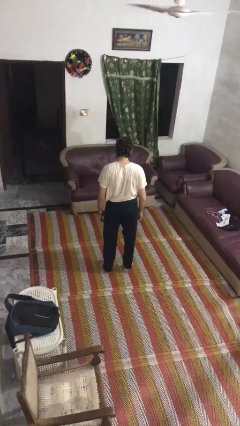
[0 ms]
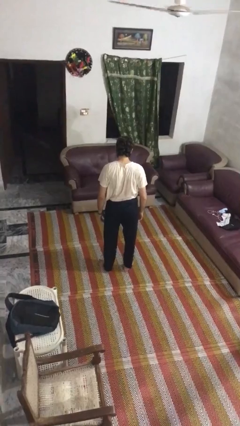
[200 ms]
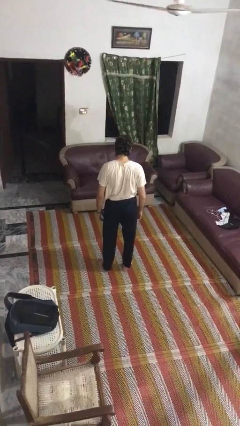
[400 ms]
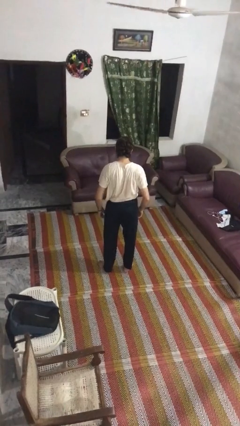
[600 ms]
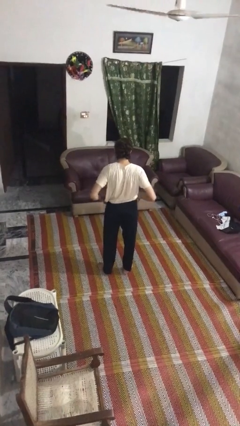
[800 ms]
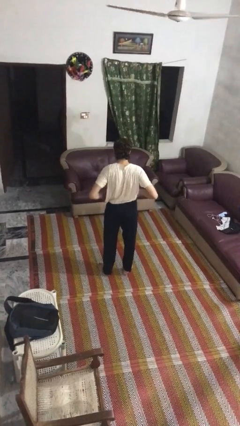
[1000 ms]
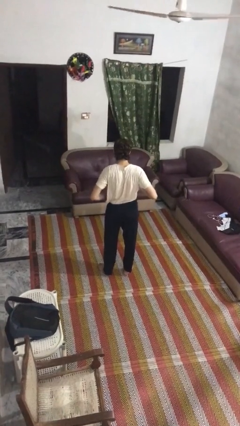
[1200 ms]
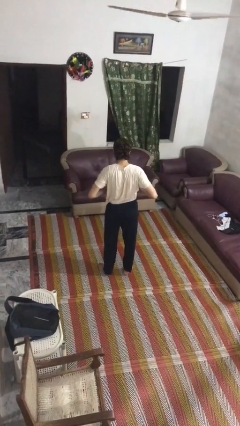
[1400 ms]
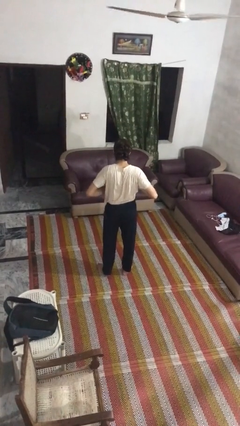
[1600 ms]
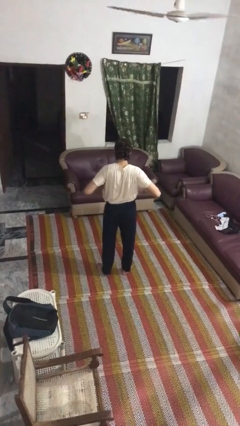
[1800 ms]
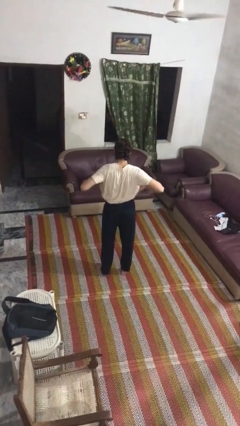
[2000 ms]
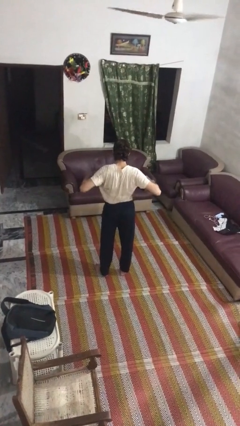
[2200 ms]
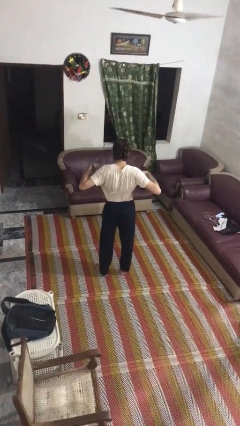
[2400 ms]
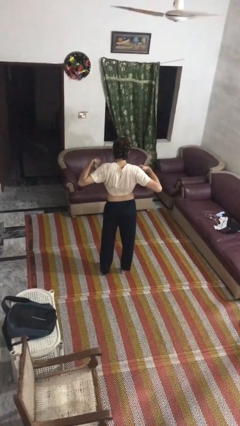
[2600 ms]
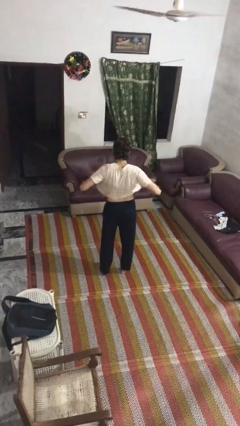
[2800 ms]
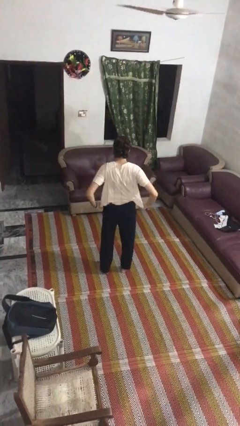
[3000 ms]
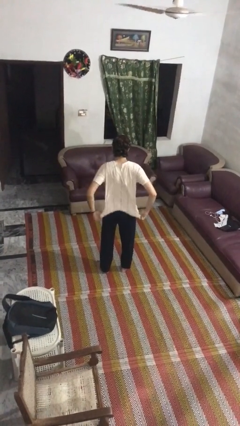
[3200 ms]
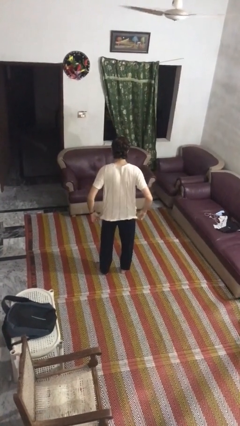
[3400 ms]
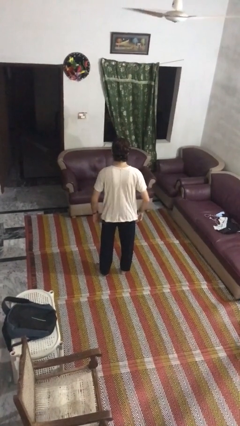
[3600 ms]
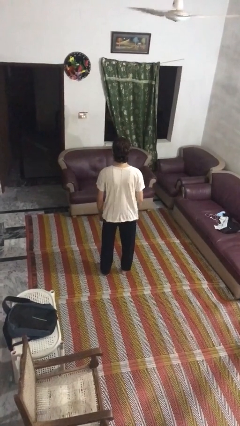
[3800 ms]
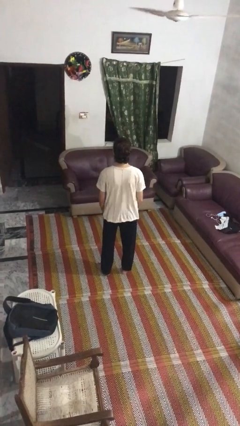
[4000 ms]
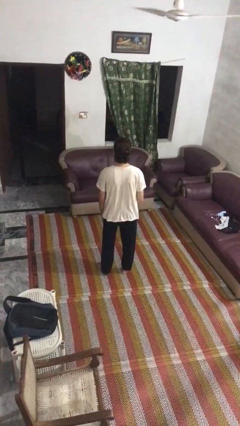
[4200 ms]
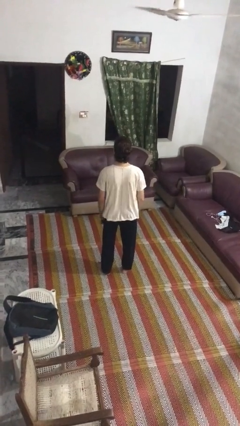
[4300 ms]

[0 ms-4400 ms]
person untucks shirt

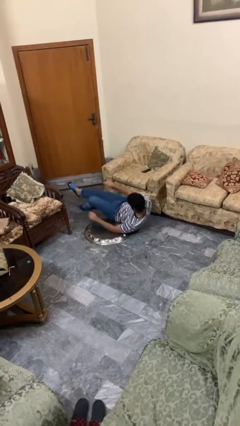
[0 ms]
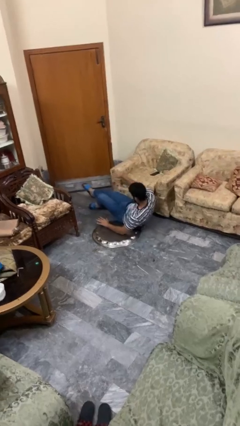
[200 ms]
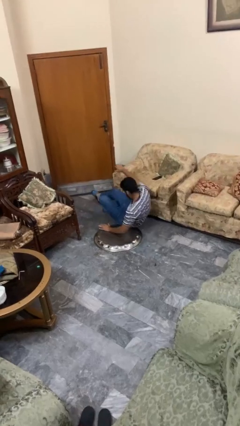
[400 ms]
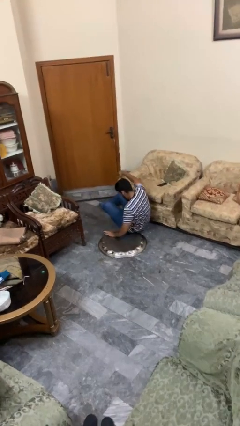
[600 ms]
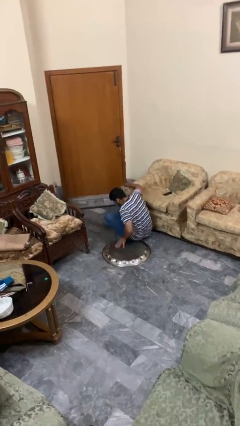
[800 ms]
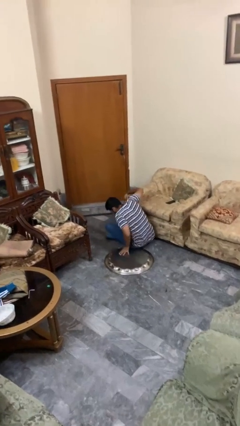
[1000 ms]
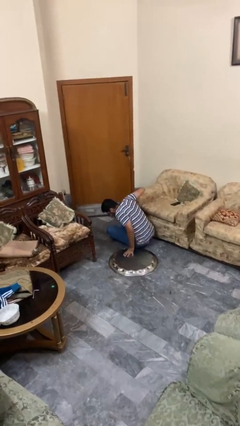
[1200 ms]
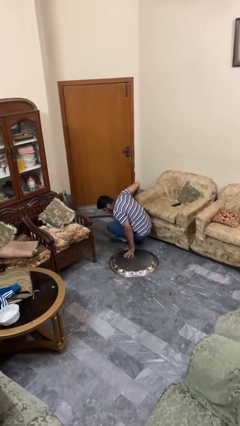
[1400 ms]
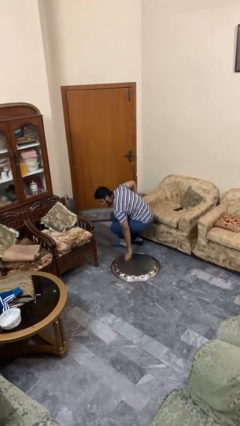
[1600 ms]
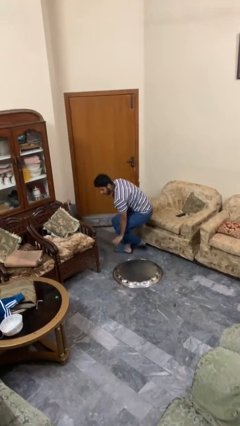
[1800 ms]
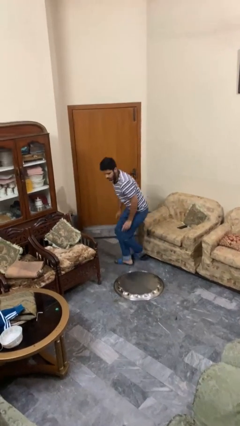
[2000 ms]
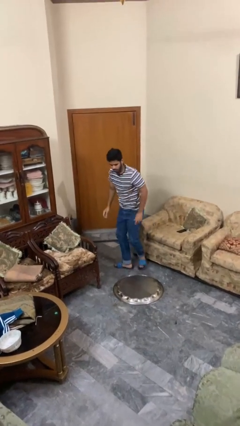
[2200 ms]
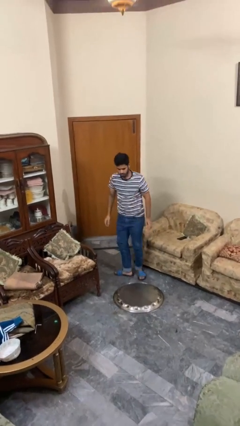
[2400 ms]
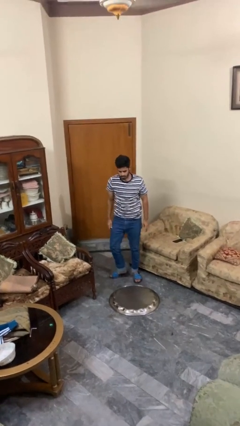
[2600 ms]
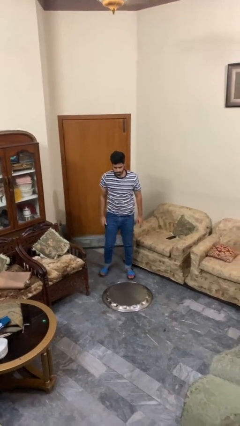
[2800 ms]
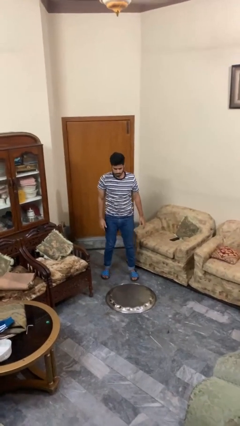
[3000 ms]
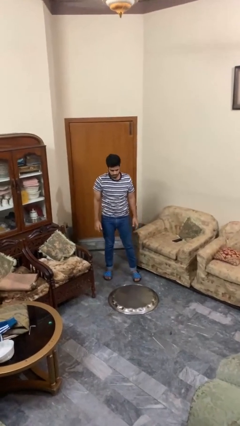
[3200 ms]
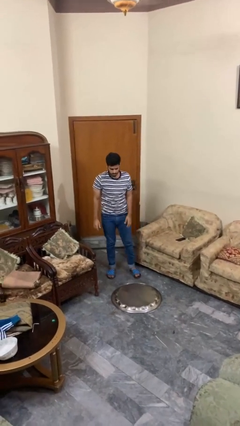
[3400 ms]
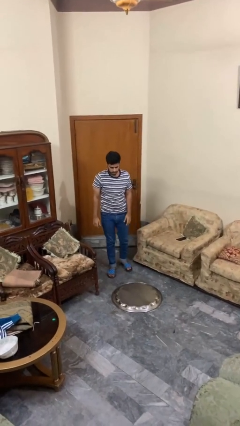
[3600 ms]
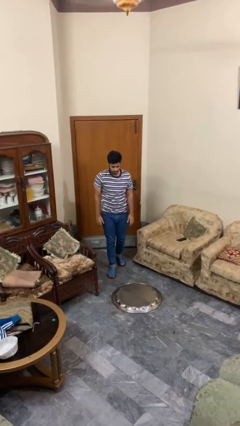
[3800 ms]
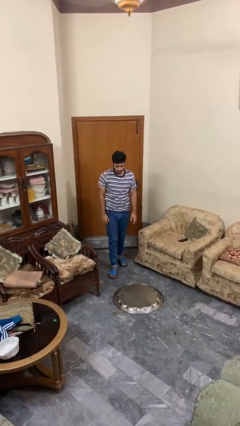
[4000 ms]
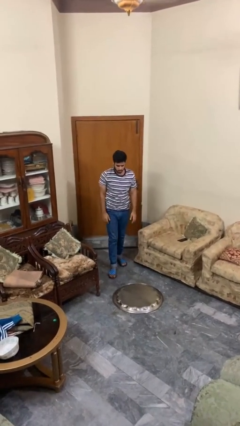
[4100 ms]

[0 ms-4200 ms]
person stands up from floor

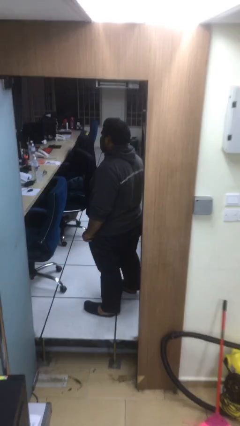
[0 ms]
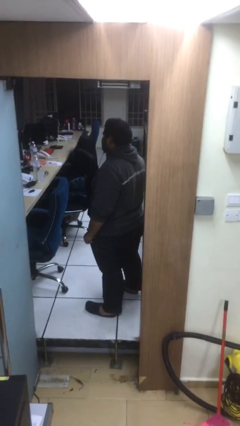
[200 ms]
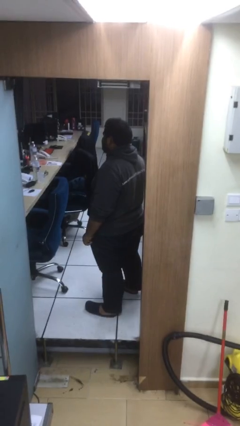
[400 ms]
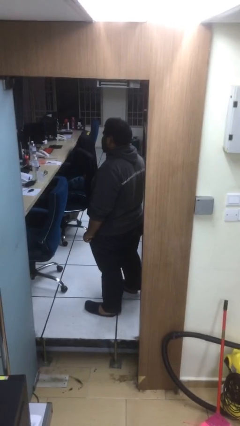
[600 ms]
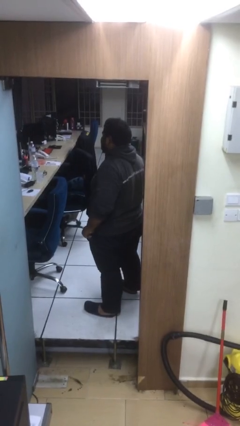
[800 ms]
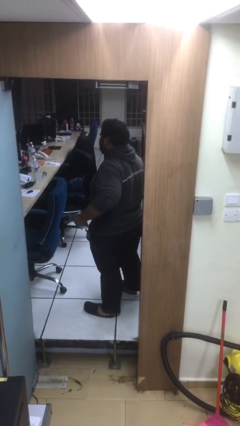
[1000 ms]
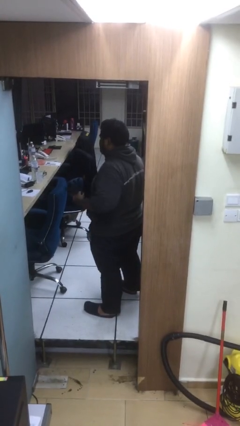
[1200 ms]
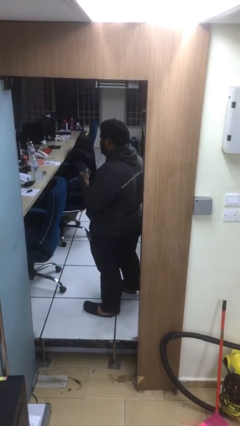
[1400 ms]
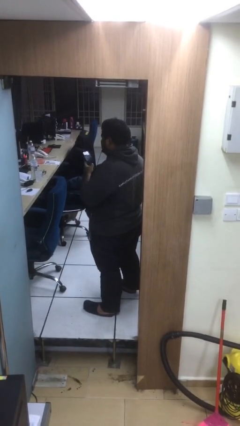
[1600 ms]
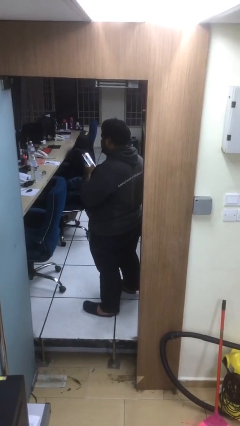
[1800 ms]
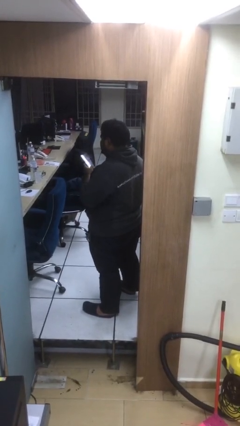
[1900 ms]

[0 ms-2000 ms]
person takes phone from pocket

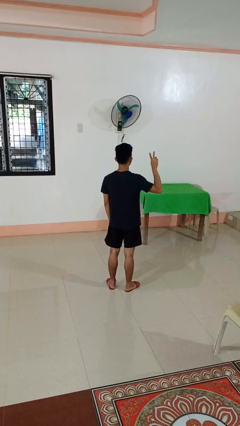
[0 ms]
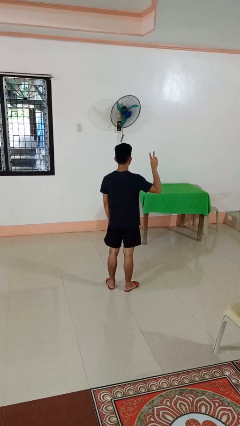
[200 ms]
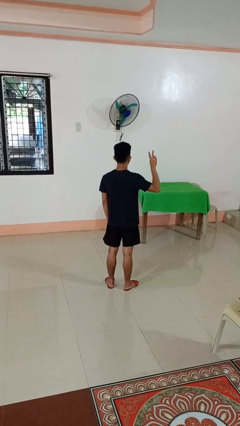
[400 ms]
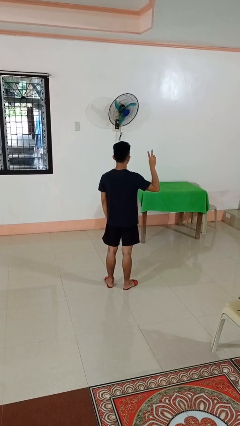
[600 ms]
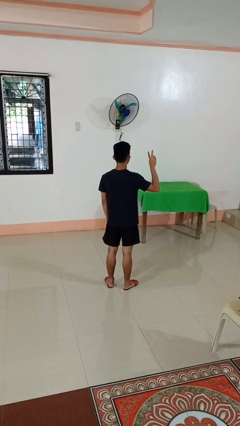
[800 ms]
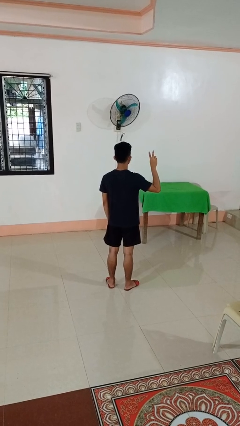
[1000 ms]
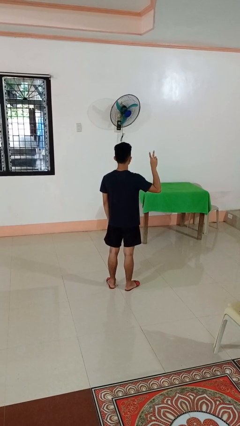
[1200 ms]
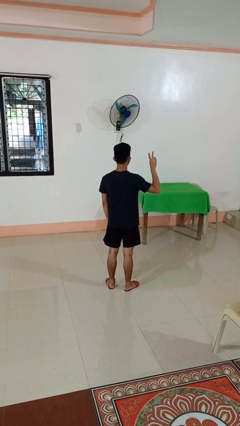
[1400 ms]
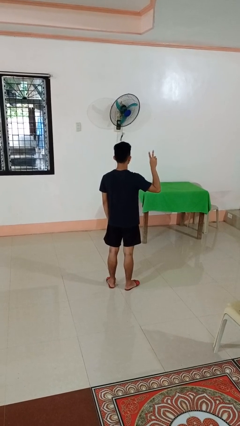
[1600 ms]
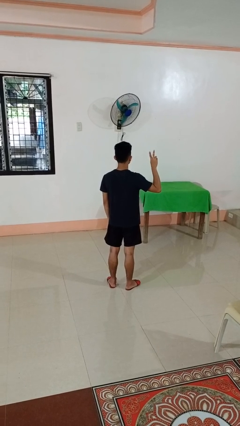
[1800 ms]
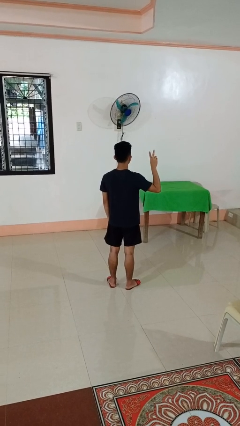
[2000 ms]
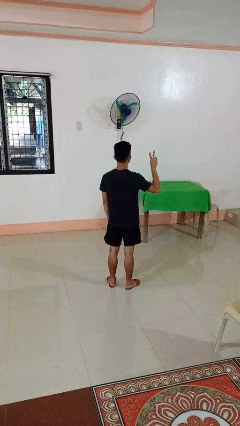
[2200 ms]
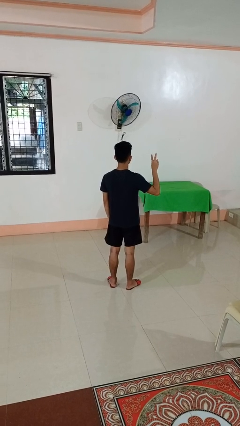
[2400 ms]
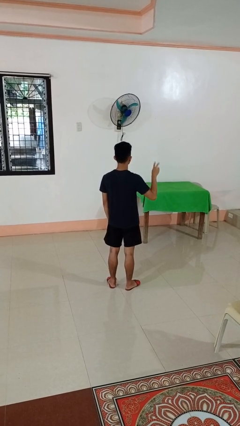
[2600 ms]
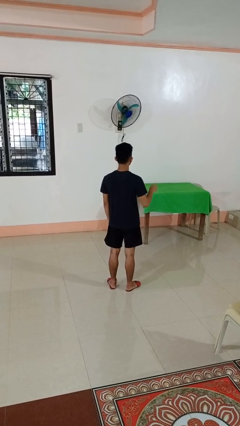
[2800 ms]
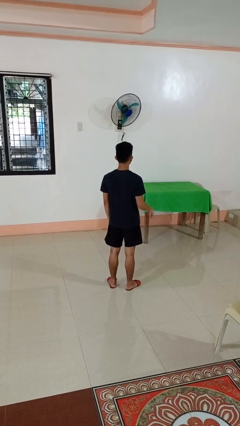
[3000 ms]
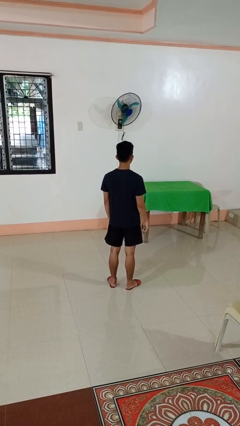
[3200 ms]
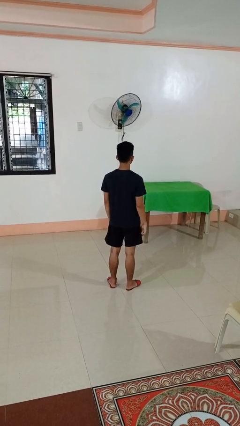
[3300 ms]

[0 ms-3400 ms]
person gestures peace

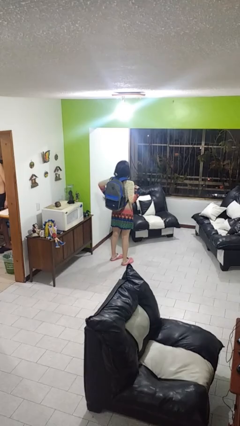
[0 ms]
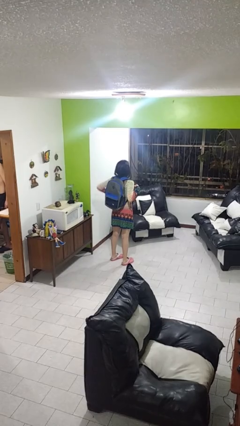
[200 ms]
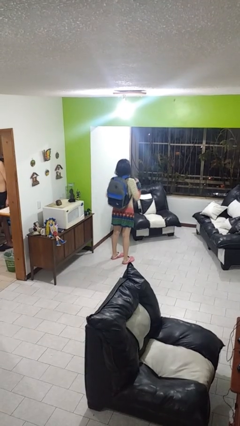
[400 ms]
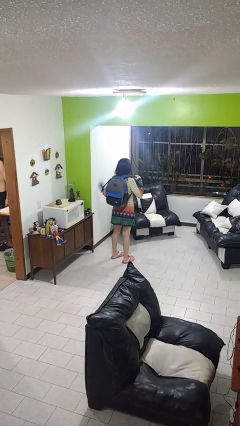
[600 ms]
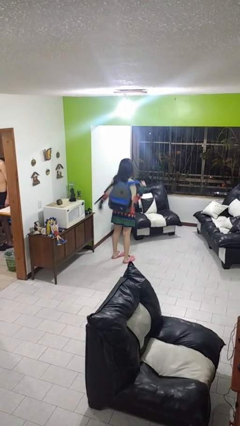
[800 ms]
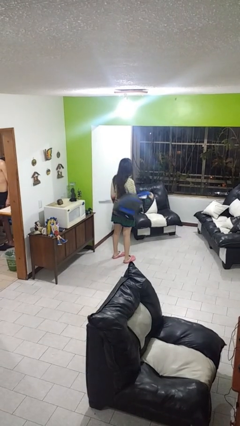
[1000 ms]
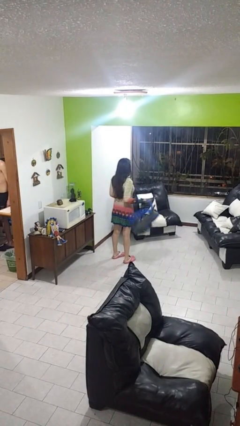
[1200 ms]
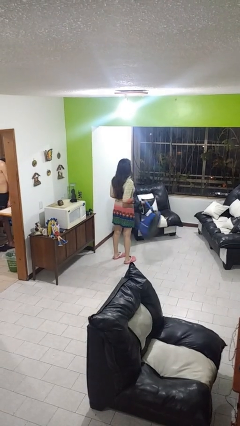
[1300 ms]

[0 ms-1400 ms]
person takes off backpack

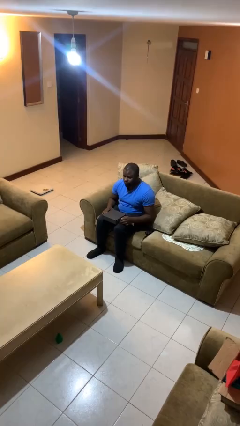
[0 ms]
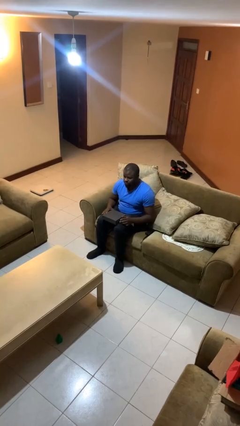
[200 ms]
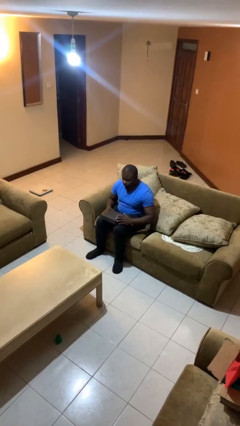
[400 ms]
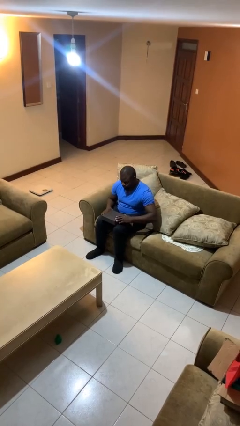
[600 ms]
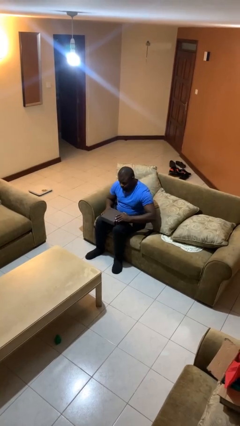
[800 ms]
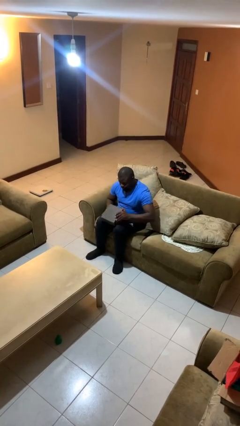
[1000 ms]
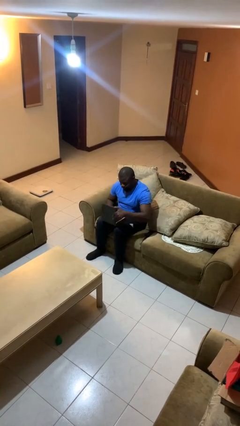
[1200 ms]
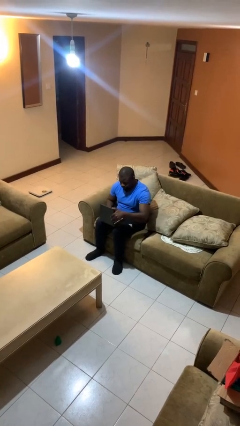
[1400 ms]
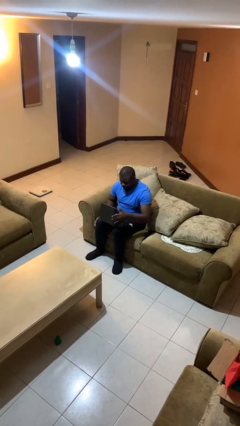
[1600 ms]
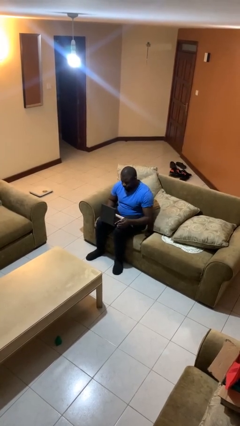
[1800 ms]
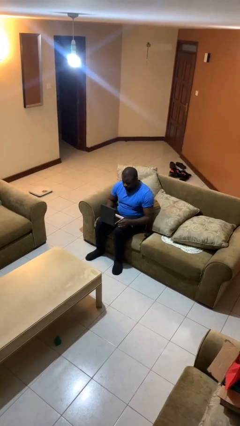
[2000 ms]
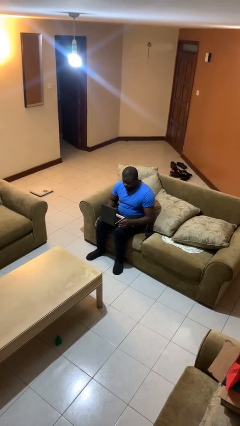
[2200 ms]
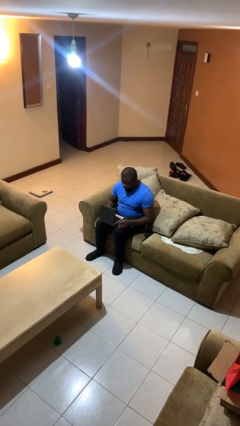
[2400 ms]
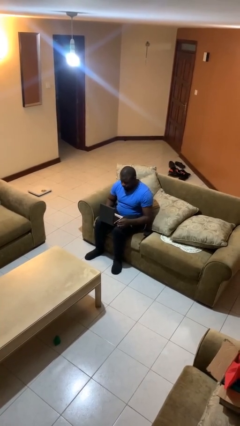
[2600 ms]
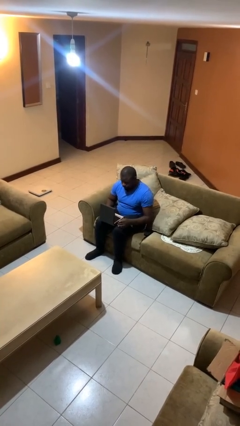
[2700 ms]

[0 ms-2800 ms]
person opens jewelry box
